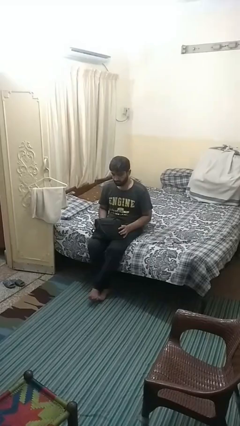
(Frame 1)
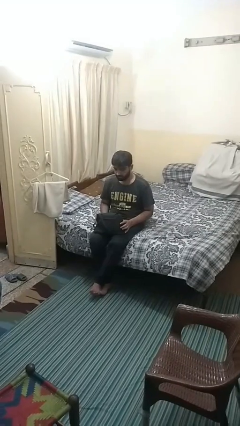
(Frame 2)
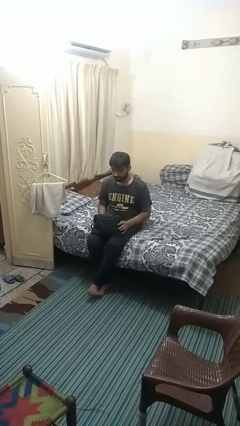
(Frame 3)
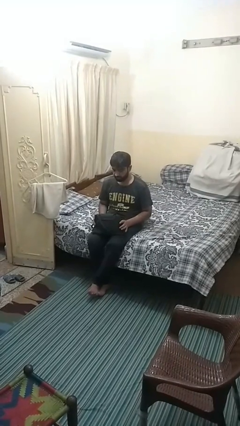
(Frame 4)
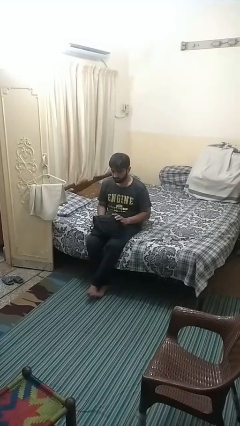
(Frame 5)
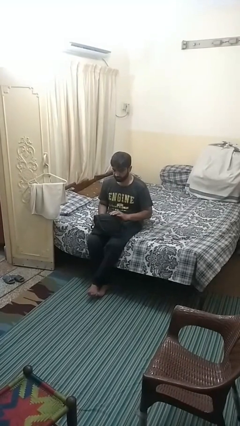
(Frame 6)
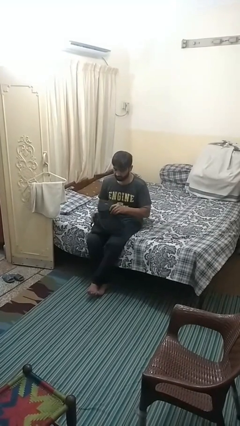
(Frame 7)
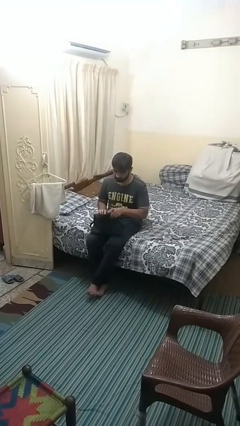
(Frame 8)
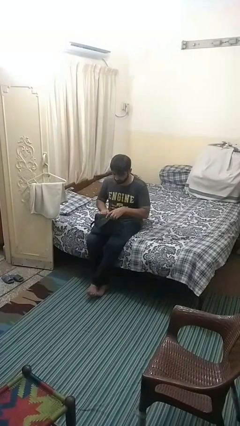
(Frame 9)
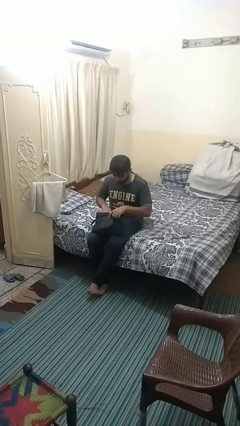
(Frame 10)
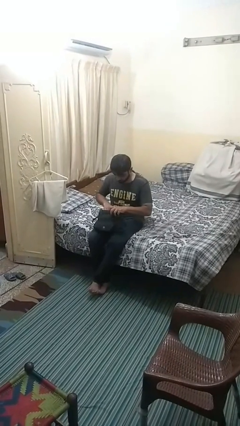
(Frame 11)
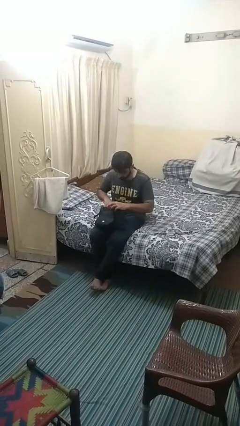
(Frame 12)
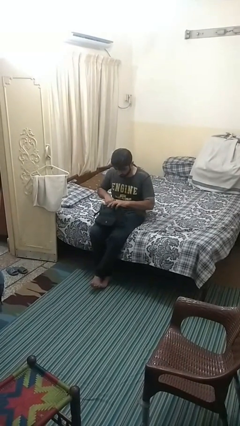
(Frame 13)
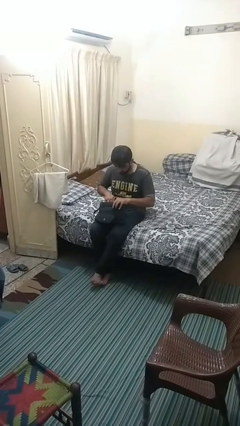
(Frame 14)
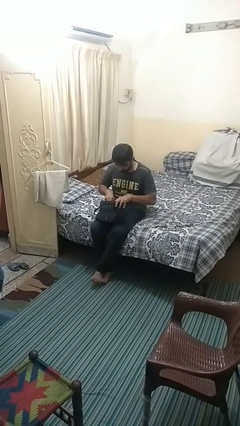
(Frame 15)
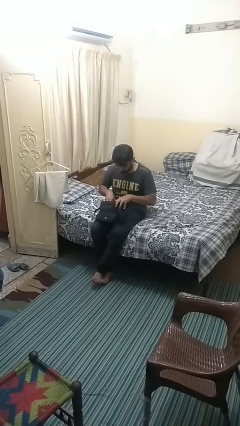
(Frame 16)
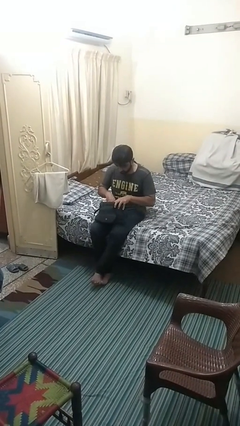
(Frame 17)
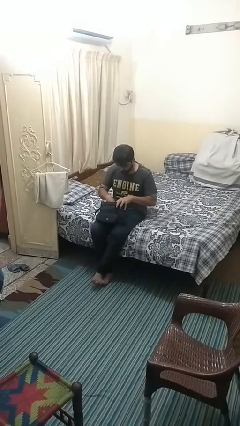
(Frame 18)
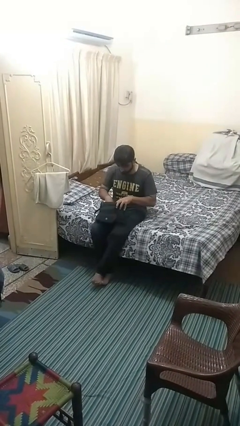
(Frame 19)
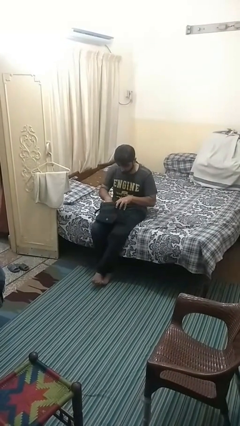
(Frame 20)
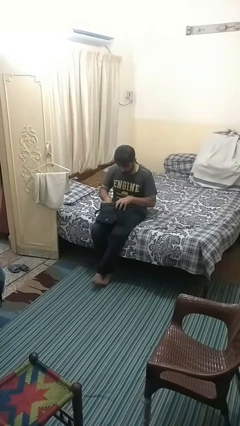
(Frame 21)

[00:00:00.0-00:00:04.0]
person searches in purse

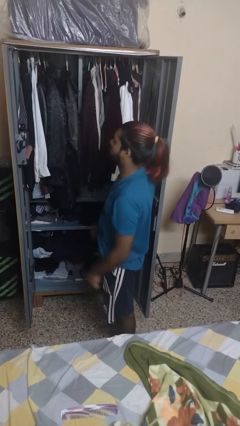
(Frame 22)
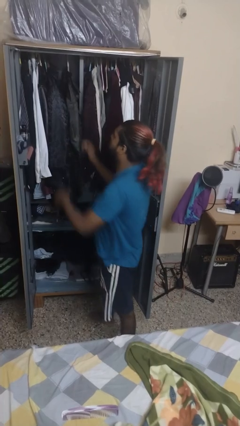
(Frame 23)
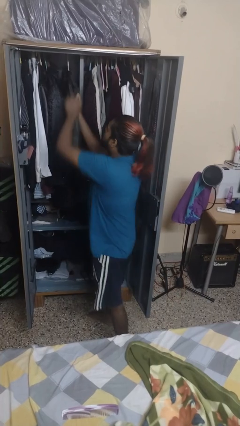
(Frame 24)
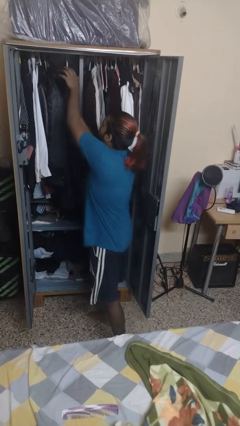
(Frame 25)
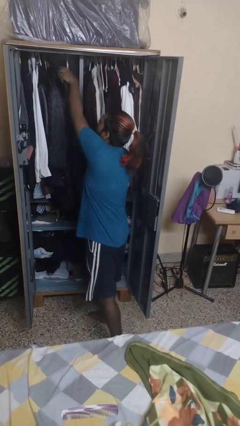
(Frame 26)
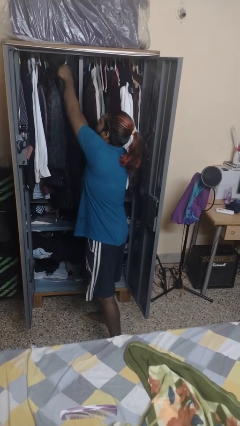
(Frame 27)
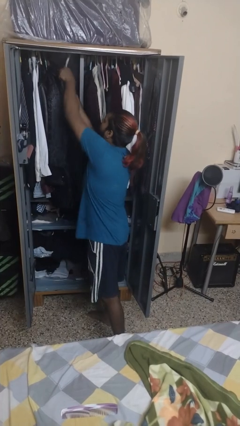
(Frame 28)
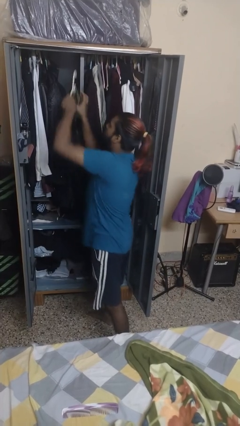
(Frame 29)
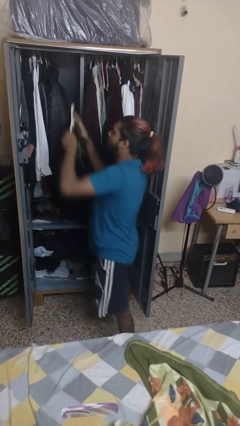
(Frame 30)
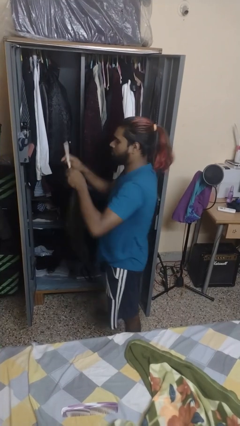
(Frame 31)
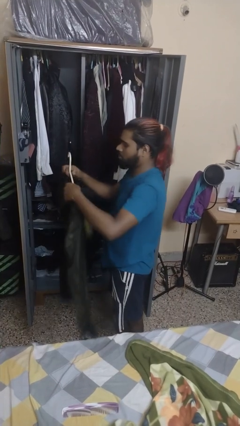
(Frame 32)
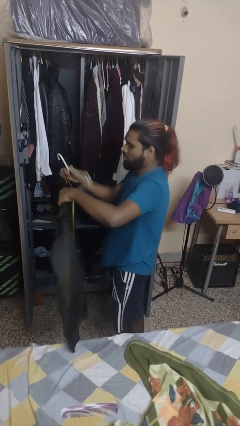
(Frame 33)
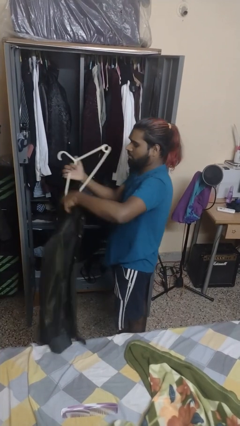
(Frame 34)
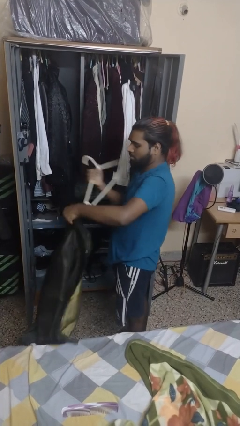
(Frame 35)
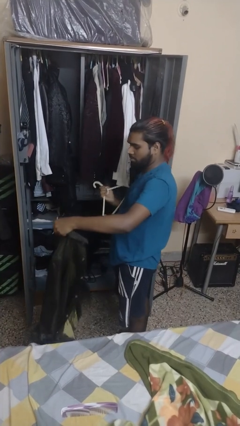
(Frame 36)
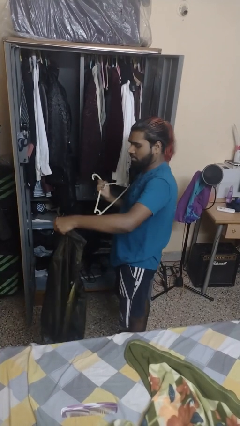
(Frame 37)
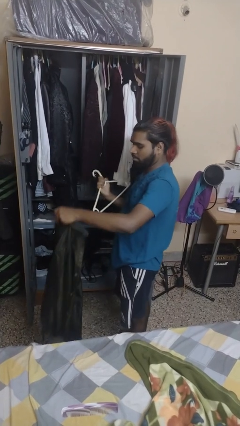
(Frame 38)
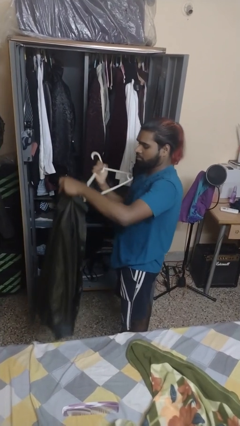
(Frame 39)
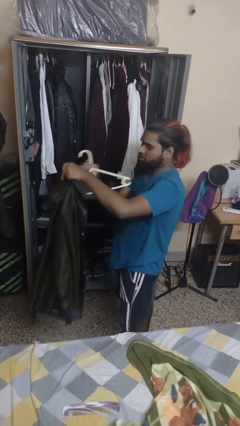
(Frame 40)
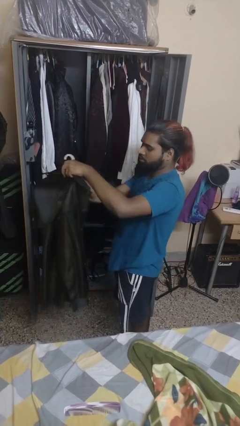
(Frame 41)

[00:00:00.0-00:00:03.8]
person takes clothes from dresser

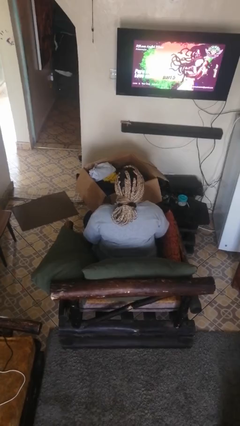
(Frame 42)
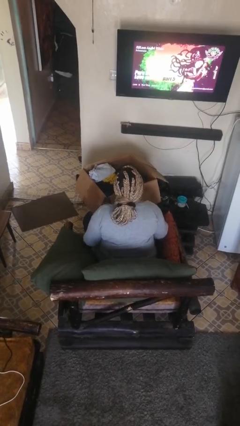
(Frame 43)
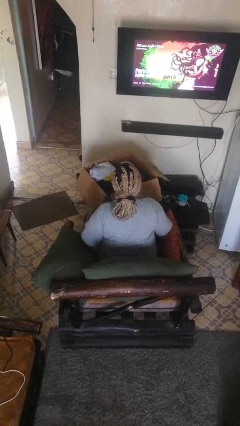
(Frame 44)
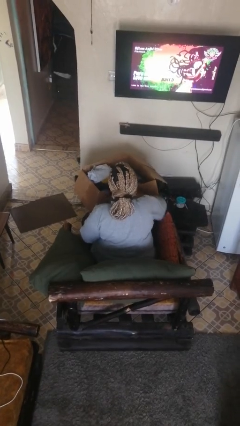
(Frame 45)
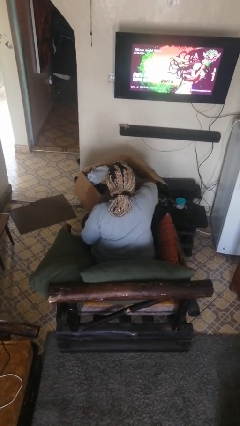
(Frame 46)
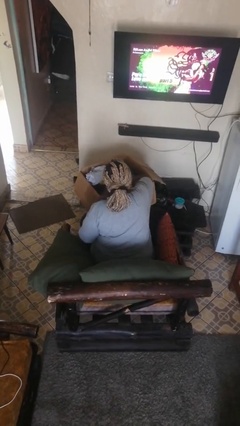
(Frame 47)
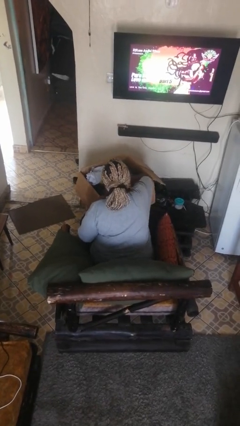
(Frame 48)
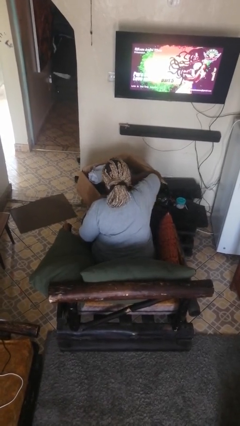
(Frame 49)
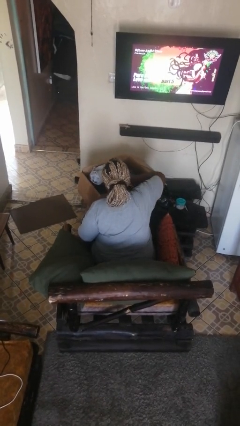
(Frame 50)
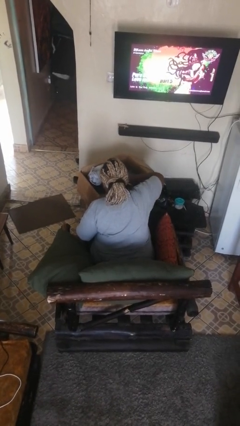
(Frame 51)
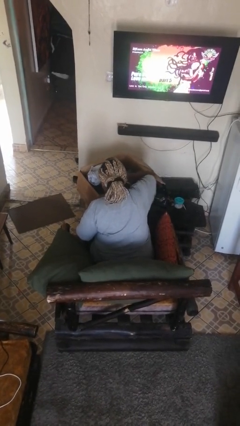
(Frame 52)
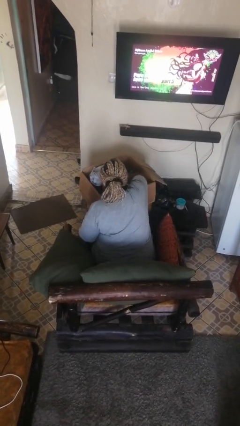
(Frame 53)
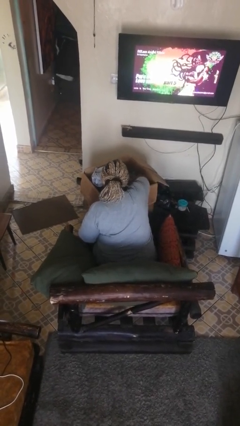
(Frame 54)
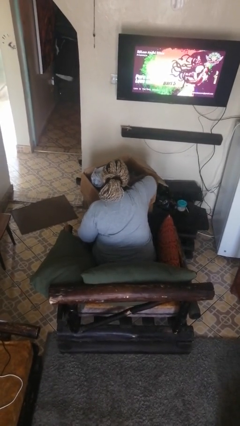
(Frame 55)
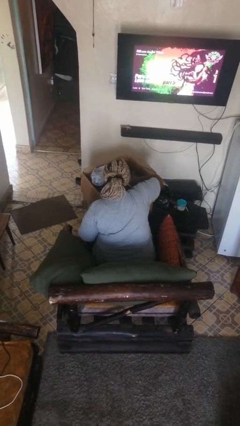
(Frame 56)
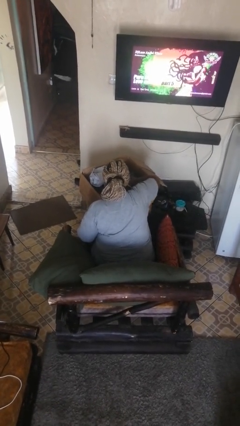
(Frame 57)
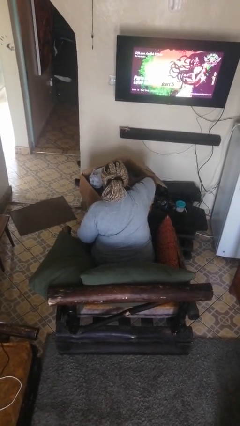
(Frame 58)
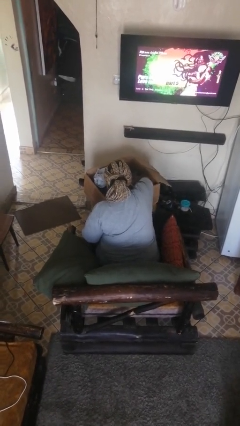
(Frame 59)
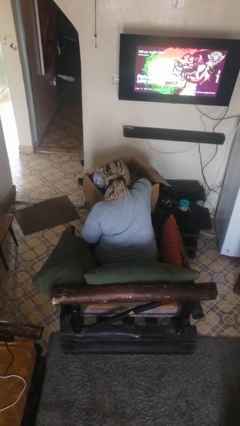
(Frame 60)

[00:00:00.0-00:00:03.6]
person searches in box

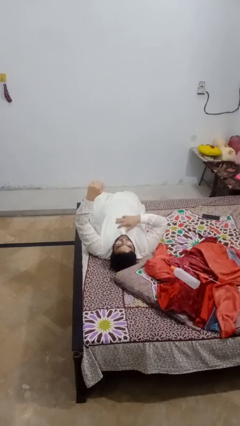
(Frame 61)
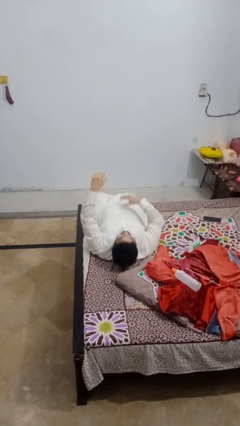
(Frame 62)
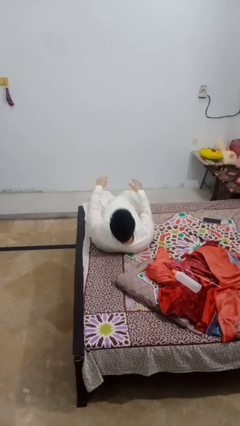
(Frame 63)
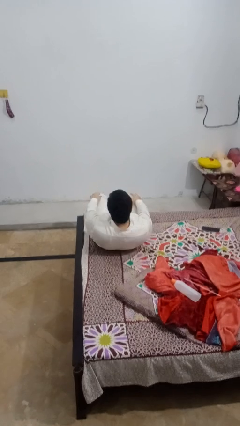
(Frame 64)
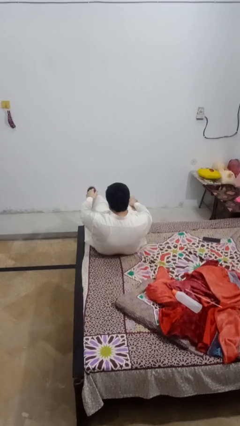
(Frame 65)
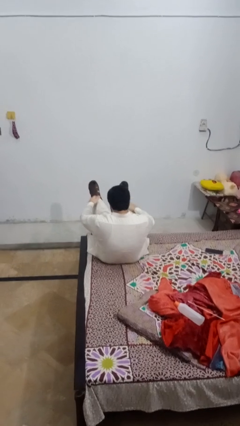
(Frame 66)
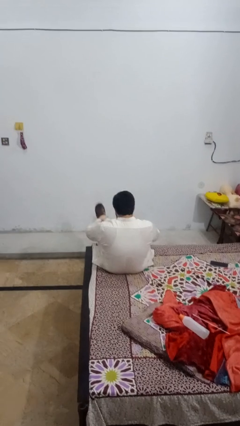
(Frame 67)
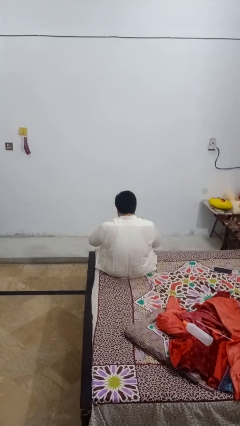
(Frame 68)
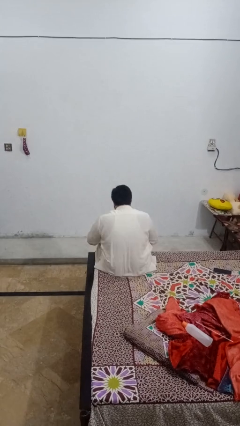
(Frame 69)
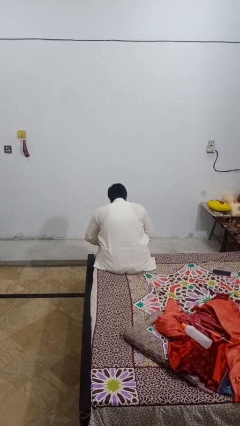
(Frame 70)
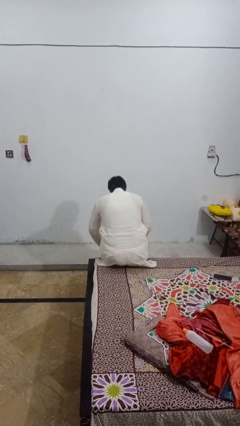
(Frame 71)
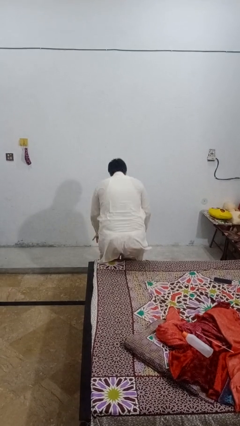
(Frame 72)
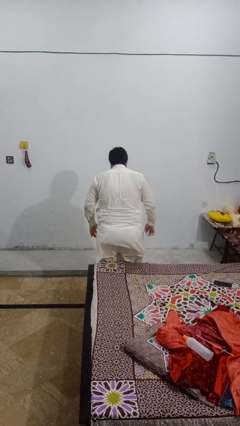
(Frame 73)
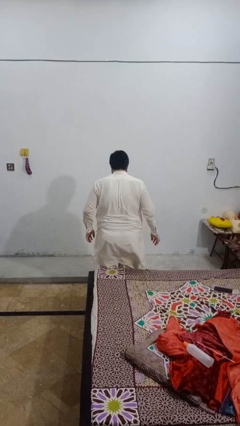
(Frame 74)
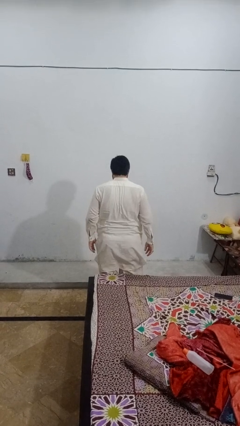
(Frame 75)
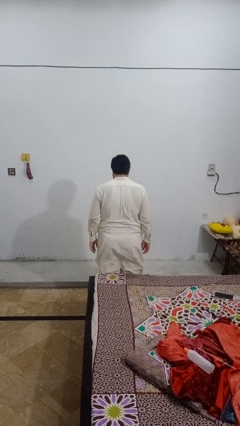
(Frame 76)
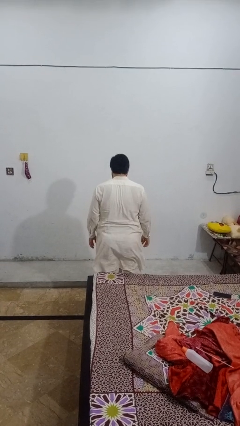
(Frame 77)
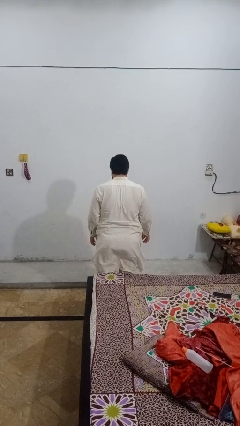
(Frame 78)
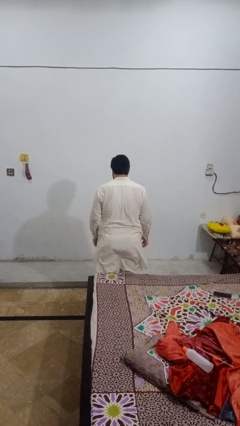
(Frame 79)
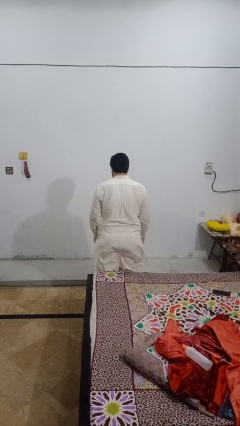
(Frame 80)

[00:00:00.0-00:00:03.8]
person stands up

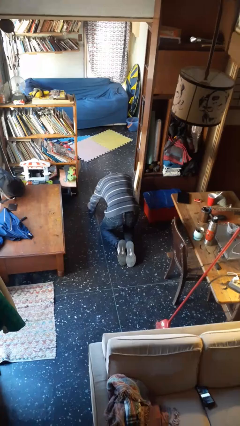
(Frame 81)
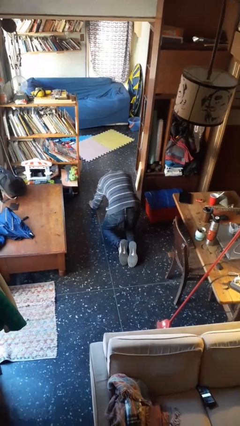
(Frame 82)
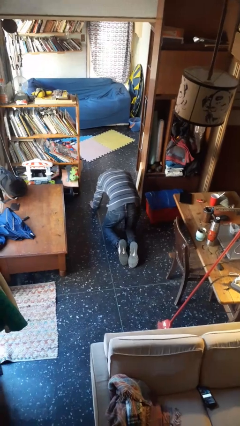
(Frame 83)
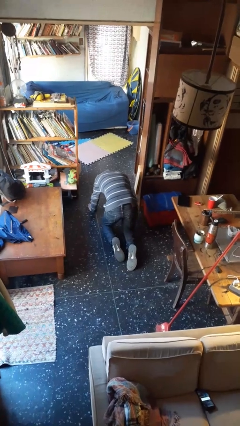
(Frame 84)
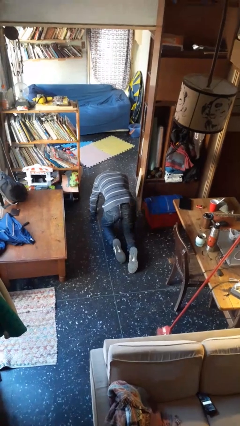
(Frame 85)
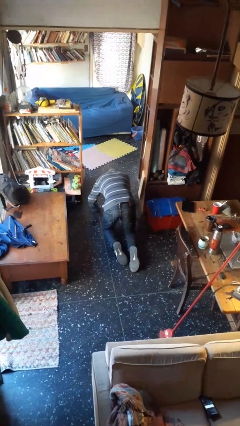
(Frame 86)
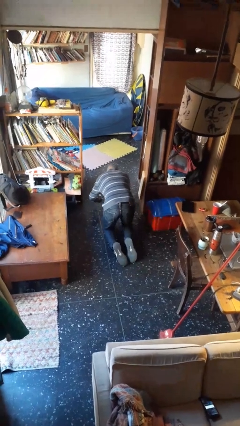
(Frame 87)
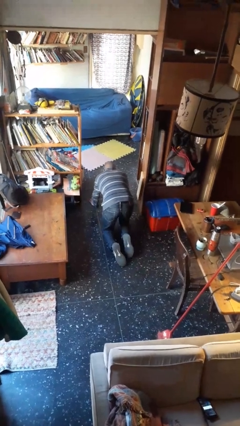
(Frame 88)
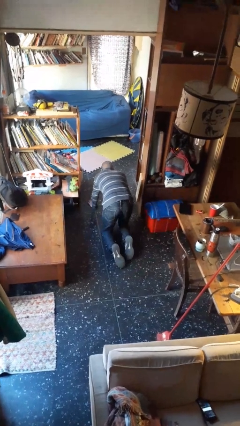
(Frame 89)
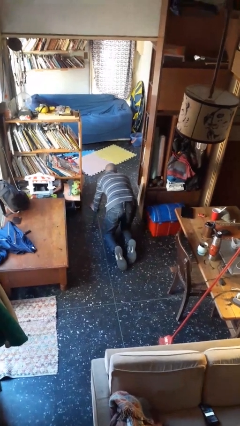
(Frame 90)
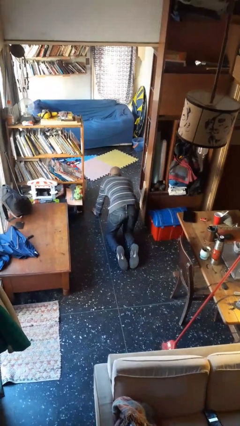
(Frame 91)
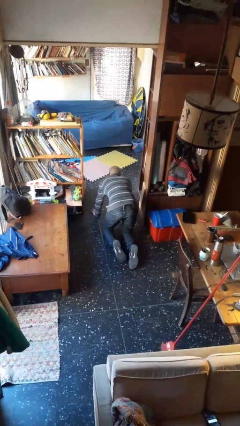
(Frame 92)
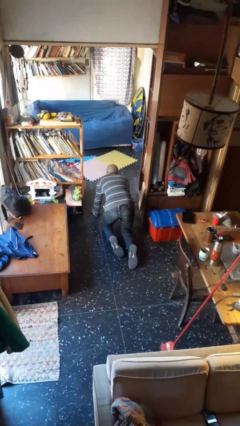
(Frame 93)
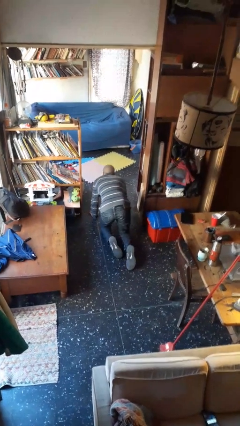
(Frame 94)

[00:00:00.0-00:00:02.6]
person crawls
